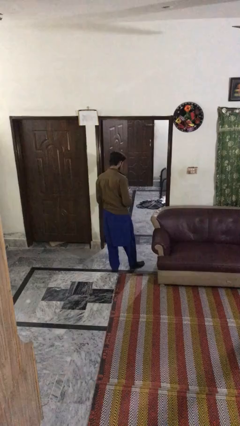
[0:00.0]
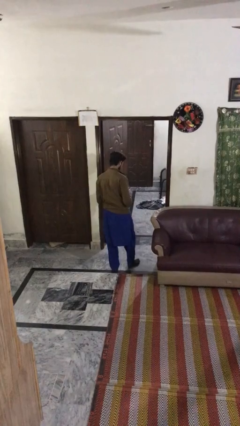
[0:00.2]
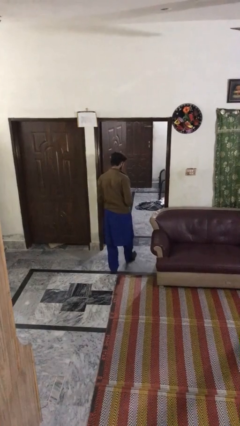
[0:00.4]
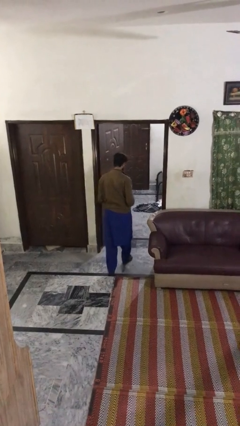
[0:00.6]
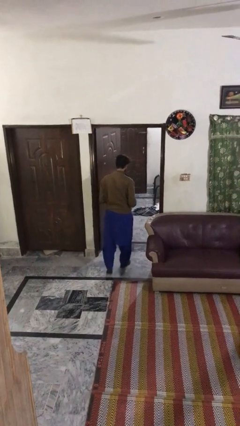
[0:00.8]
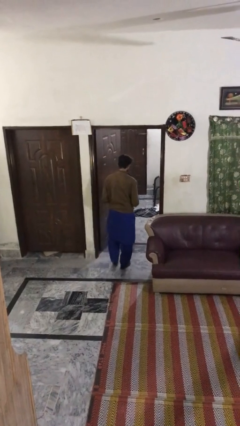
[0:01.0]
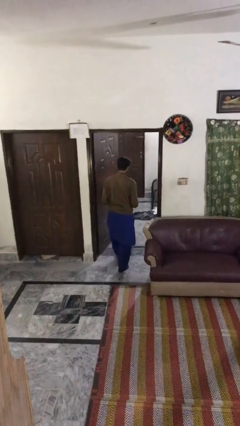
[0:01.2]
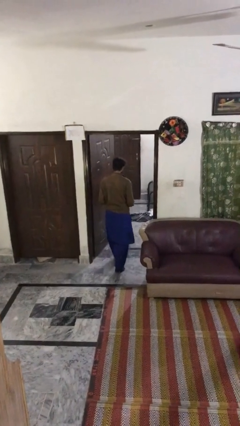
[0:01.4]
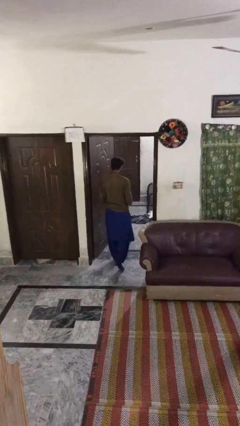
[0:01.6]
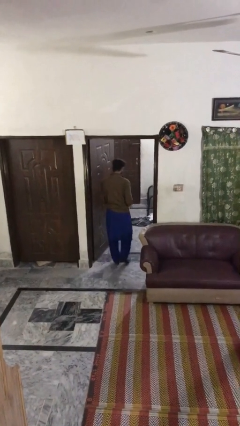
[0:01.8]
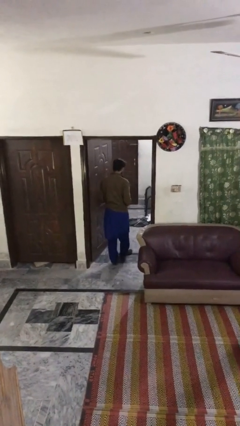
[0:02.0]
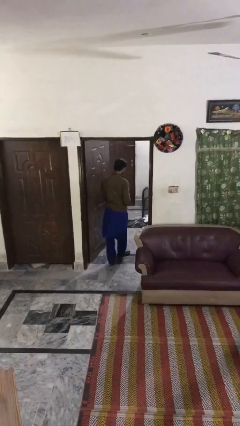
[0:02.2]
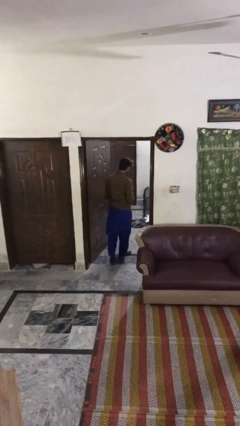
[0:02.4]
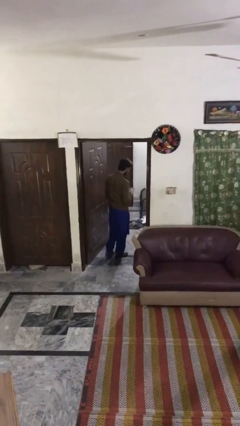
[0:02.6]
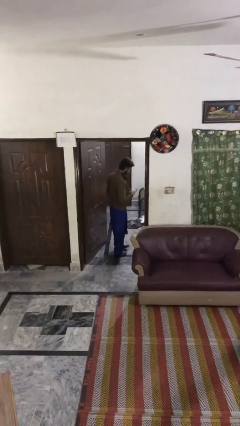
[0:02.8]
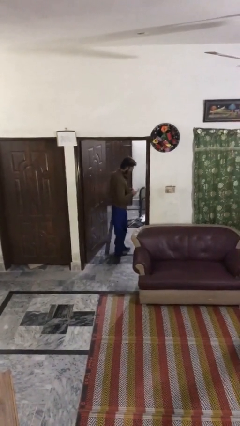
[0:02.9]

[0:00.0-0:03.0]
person enters scene through structure

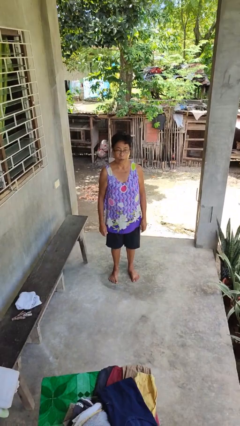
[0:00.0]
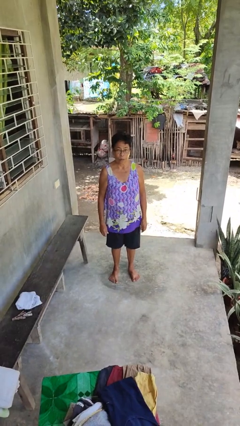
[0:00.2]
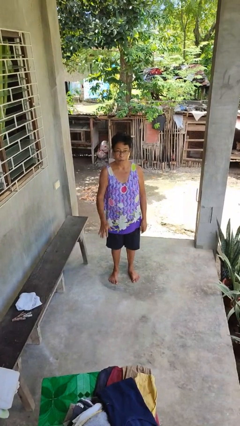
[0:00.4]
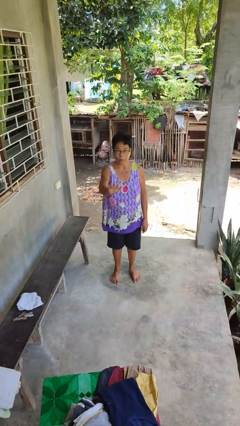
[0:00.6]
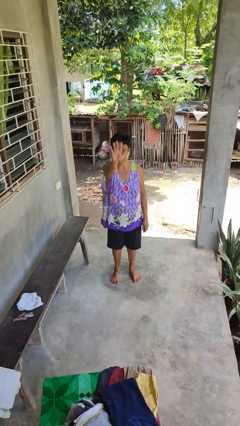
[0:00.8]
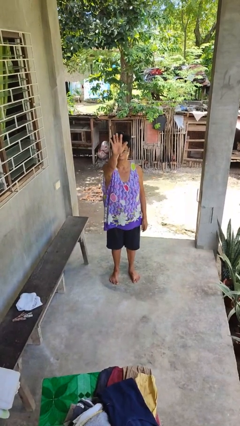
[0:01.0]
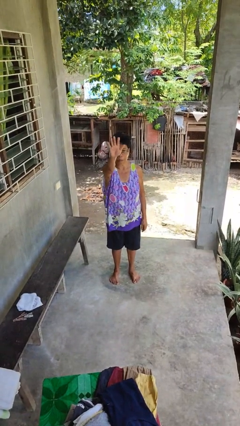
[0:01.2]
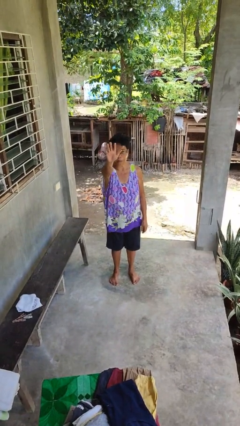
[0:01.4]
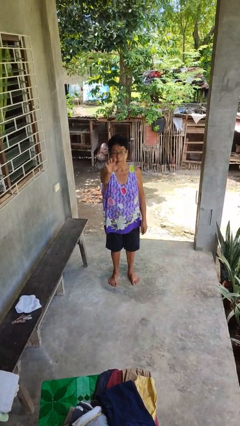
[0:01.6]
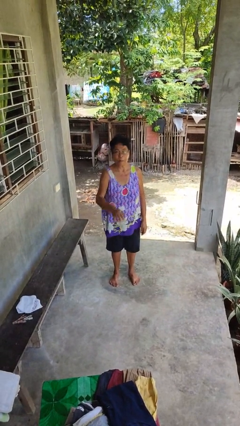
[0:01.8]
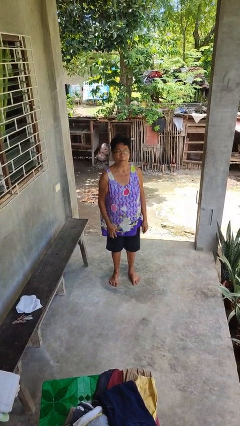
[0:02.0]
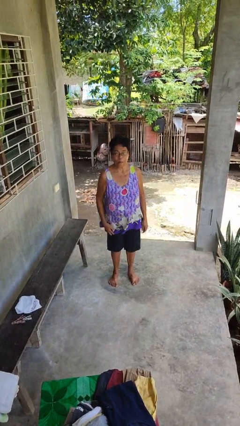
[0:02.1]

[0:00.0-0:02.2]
person gestures stop

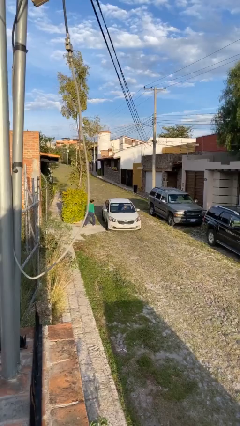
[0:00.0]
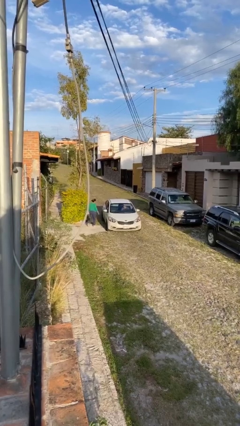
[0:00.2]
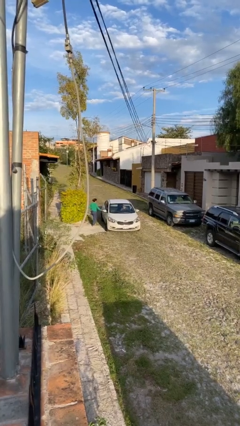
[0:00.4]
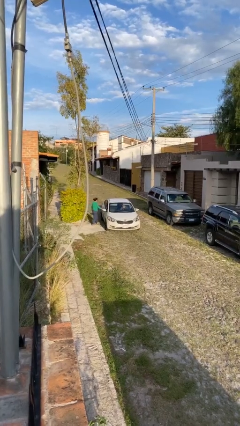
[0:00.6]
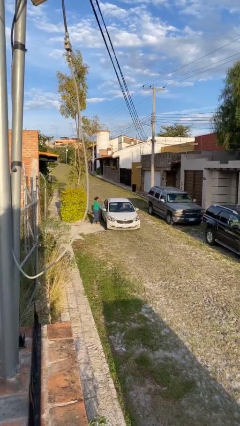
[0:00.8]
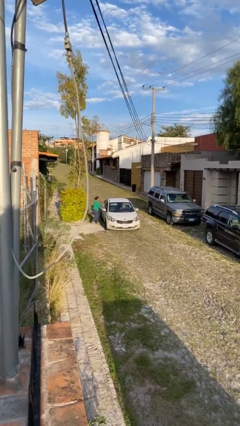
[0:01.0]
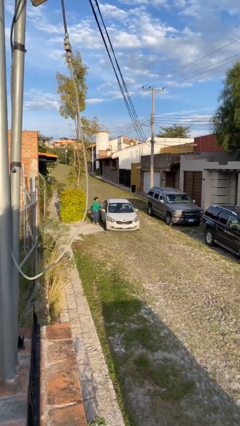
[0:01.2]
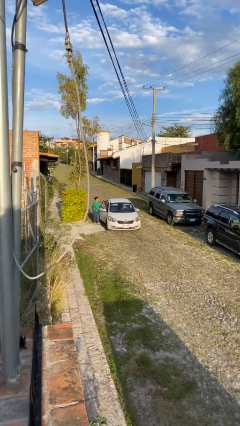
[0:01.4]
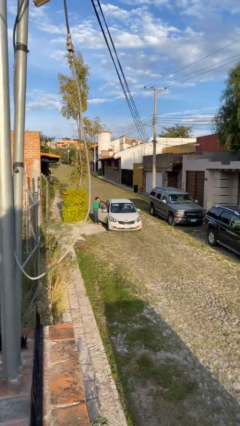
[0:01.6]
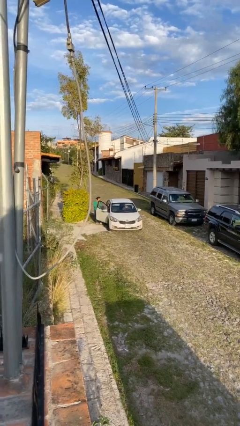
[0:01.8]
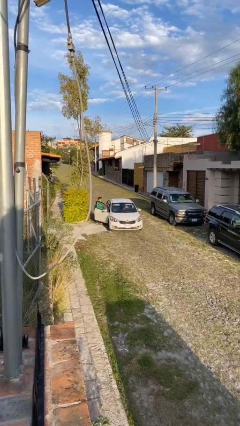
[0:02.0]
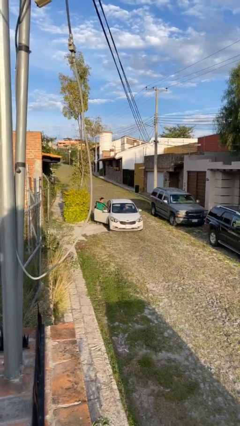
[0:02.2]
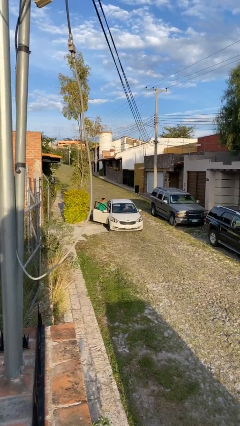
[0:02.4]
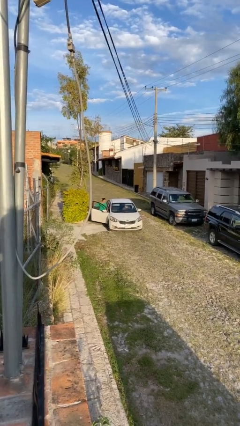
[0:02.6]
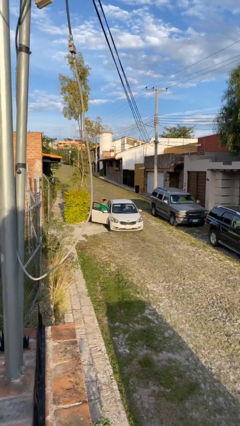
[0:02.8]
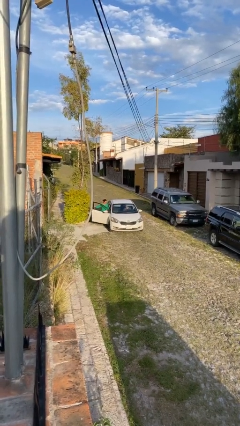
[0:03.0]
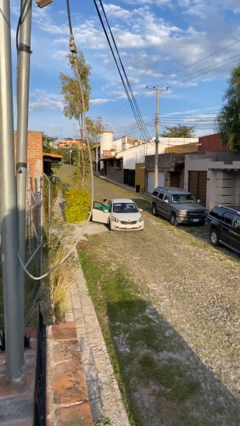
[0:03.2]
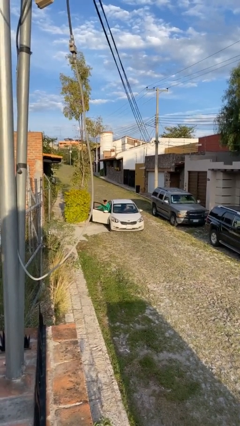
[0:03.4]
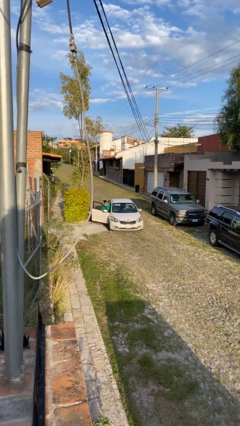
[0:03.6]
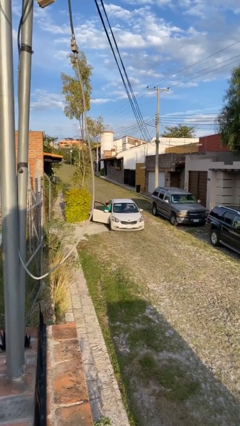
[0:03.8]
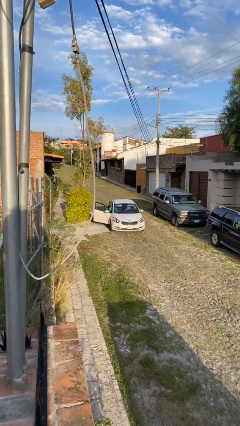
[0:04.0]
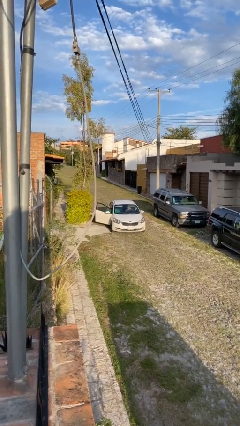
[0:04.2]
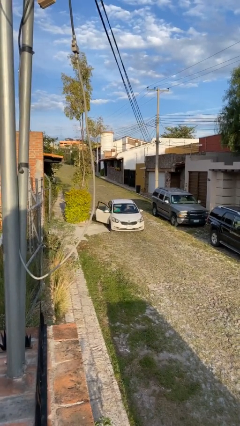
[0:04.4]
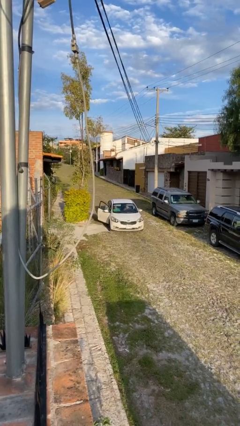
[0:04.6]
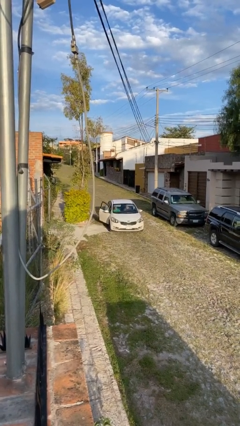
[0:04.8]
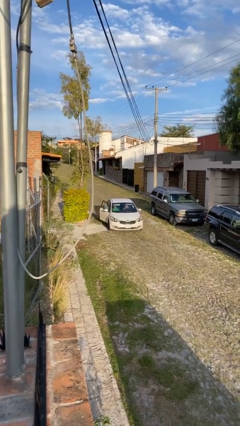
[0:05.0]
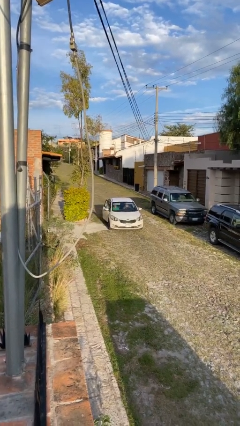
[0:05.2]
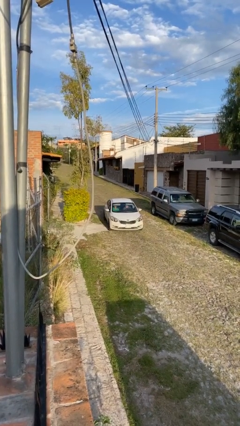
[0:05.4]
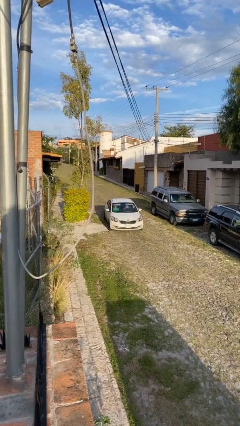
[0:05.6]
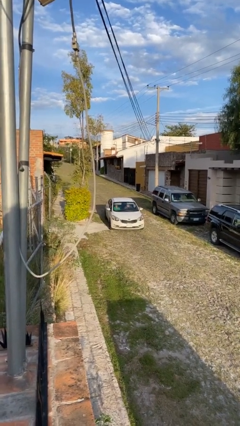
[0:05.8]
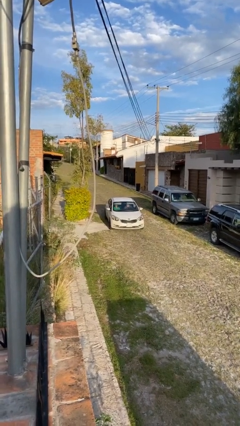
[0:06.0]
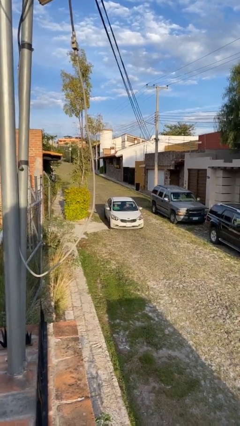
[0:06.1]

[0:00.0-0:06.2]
car picks up person

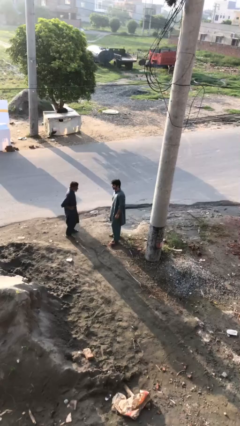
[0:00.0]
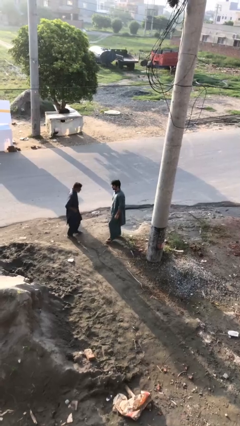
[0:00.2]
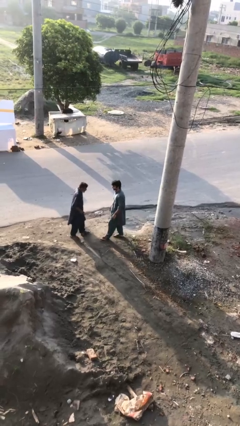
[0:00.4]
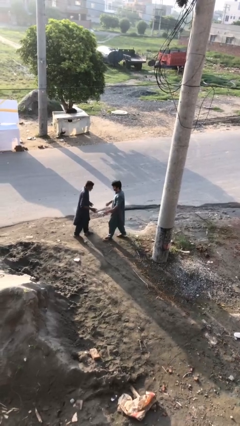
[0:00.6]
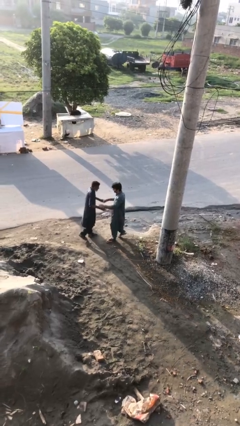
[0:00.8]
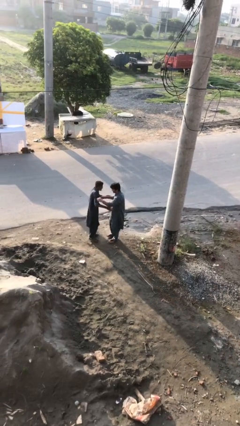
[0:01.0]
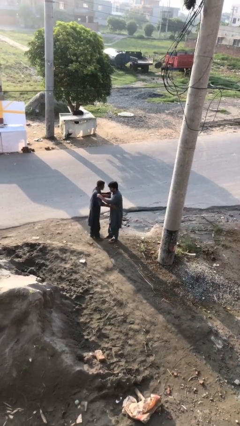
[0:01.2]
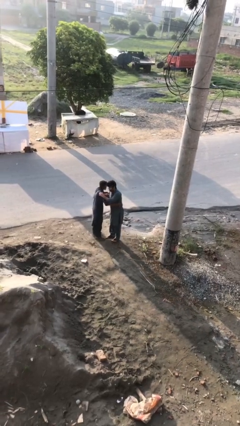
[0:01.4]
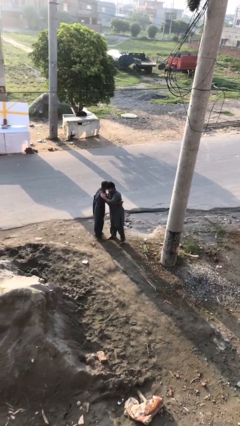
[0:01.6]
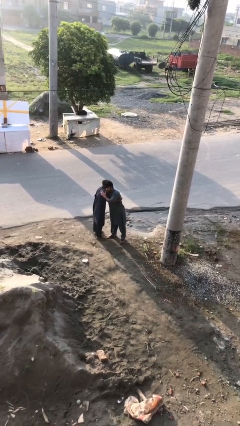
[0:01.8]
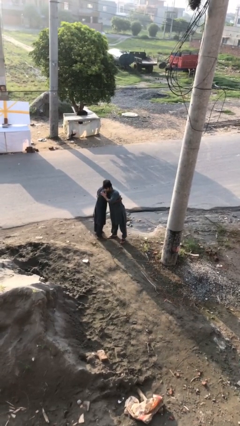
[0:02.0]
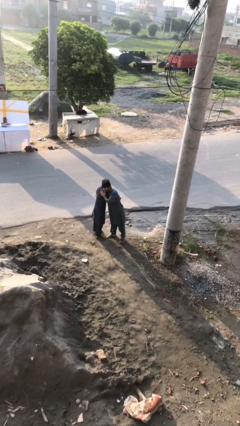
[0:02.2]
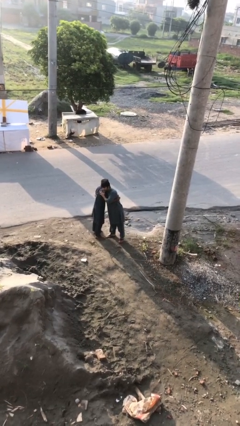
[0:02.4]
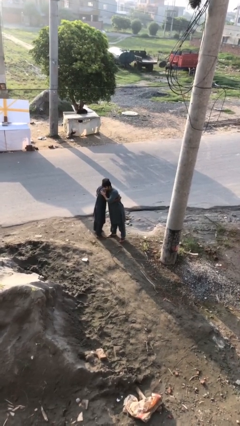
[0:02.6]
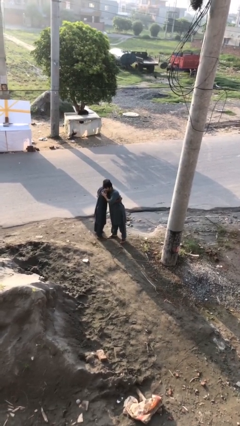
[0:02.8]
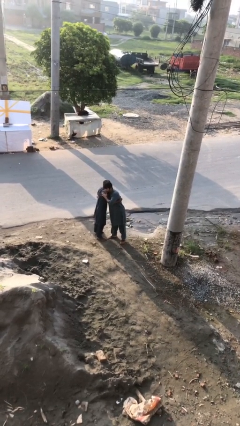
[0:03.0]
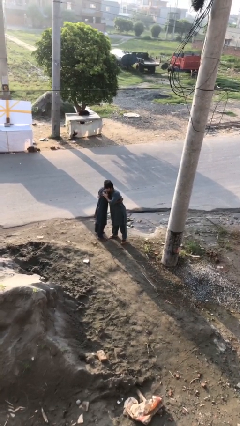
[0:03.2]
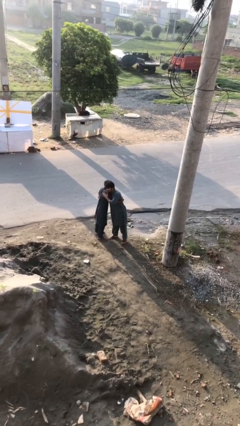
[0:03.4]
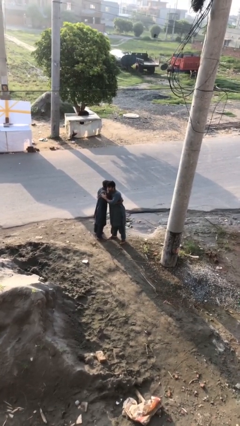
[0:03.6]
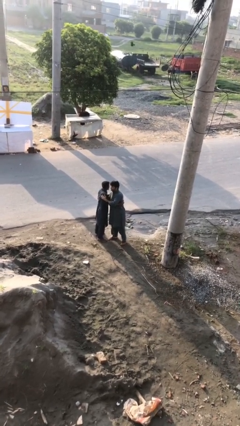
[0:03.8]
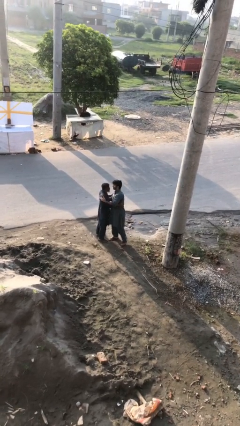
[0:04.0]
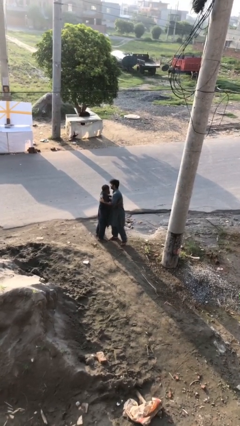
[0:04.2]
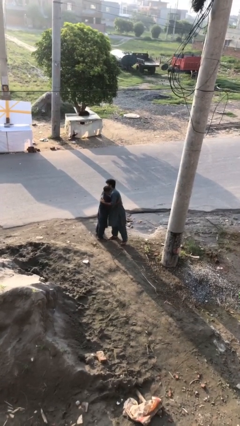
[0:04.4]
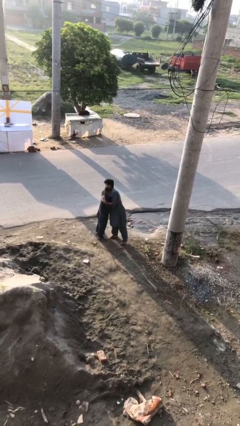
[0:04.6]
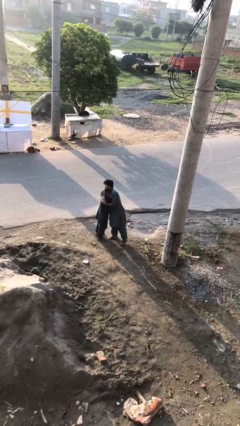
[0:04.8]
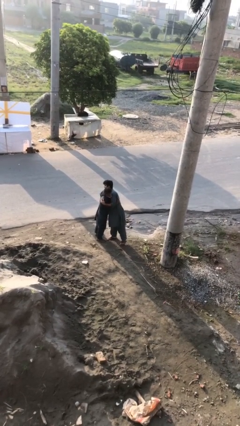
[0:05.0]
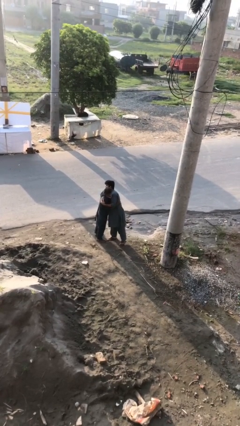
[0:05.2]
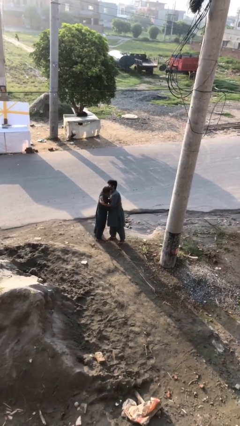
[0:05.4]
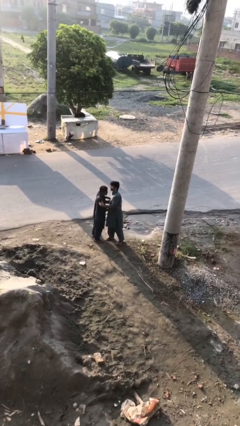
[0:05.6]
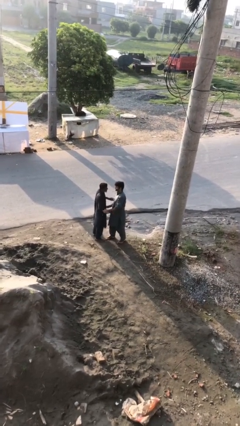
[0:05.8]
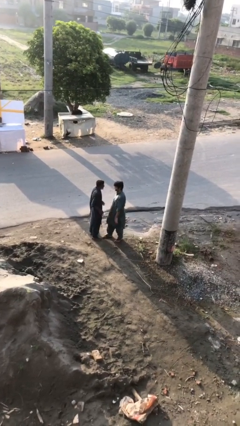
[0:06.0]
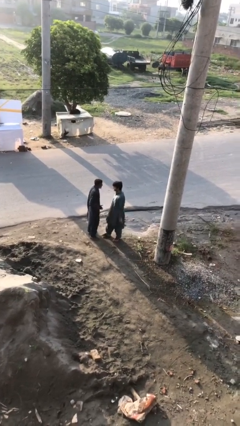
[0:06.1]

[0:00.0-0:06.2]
person embraces person
